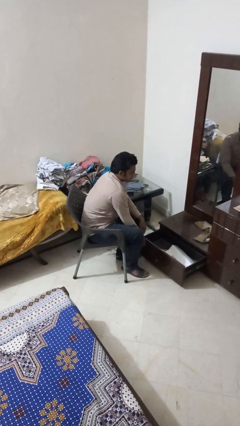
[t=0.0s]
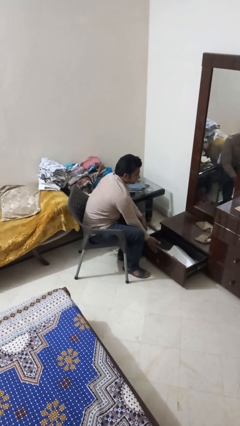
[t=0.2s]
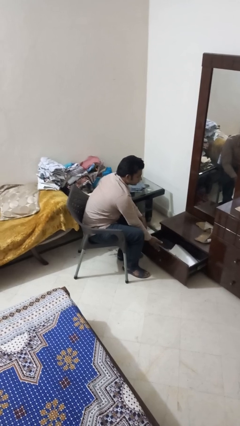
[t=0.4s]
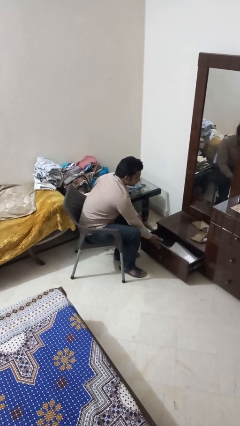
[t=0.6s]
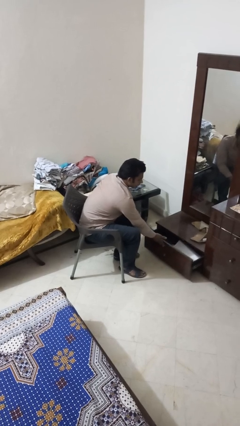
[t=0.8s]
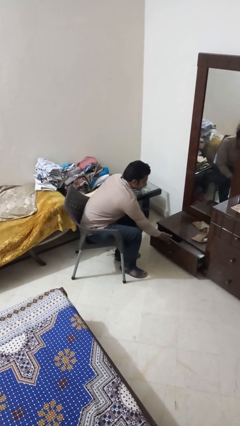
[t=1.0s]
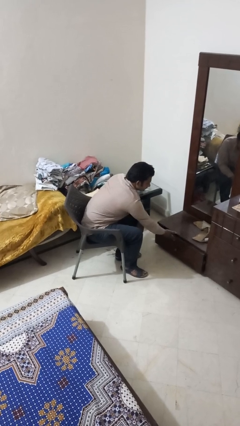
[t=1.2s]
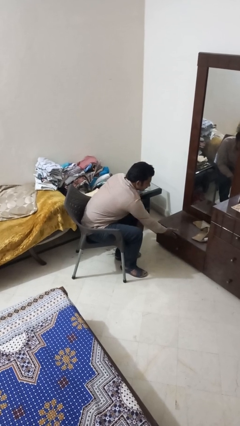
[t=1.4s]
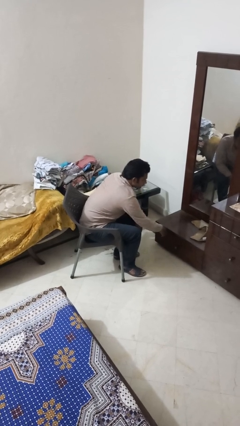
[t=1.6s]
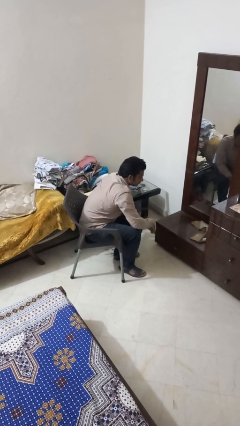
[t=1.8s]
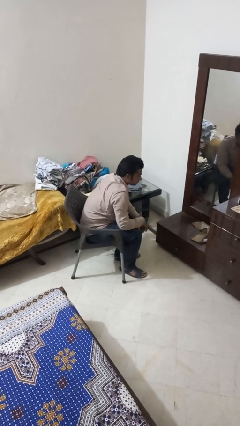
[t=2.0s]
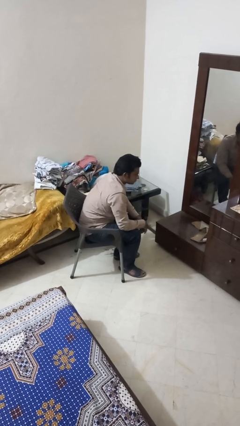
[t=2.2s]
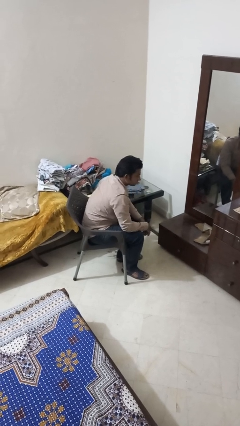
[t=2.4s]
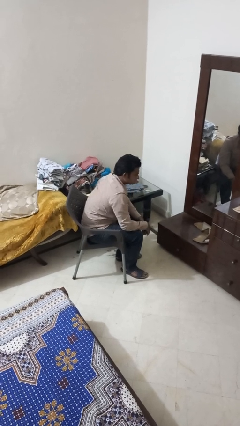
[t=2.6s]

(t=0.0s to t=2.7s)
person closes dresser drawer

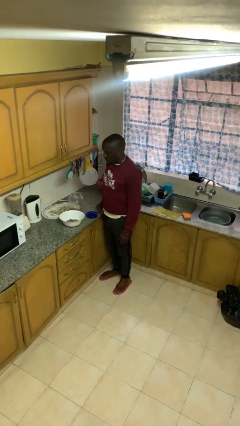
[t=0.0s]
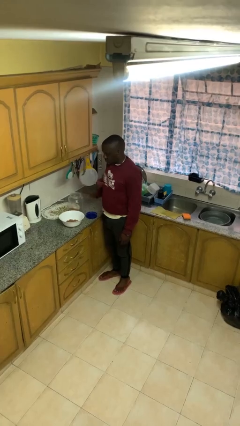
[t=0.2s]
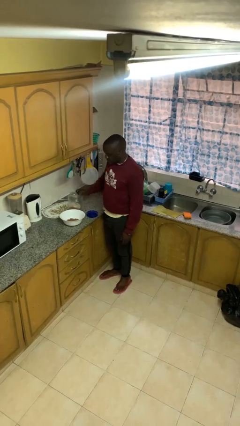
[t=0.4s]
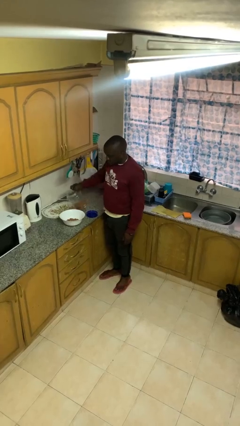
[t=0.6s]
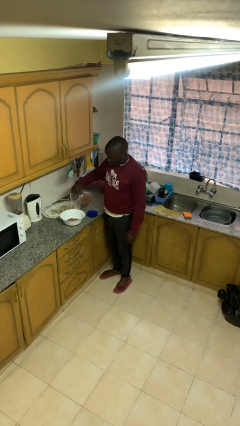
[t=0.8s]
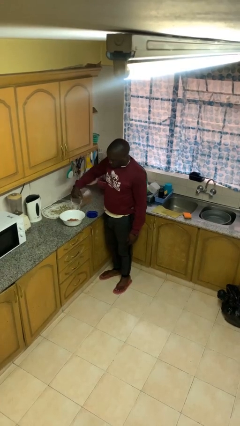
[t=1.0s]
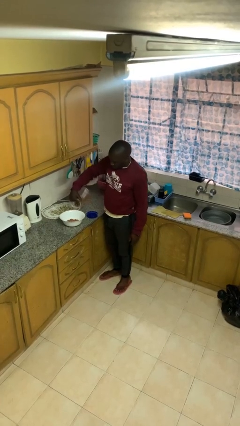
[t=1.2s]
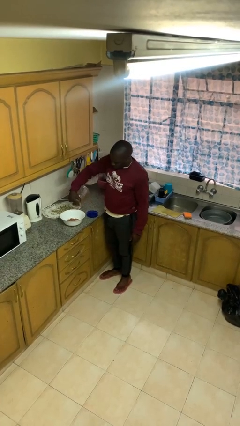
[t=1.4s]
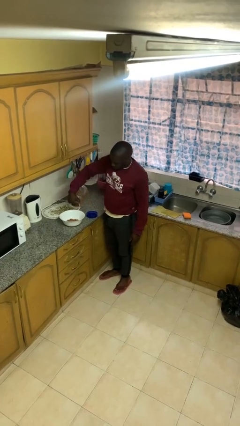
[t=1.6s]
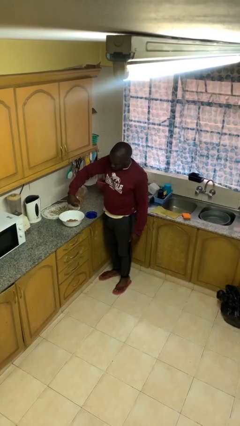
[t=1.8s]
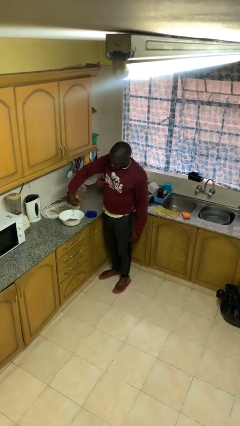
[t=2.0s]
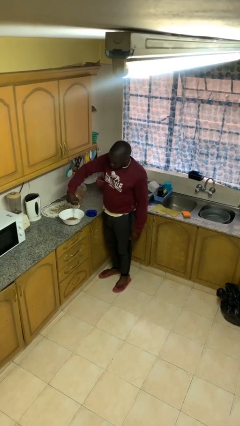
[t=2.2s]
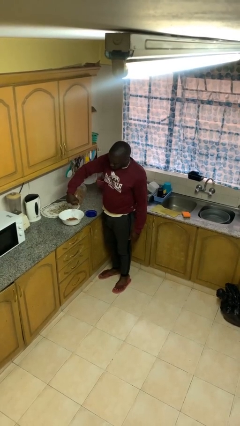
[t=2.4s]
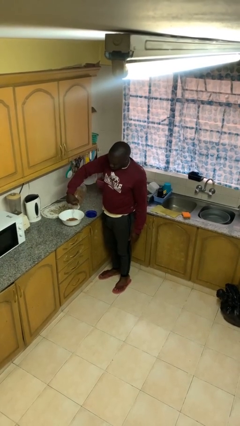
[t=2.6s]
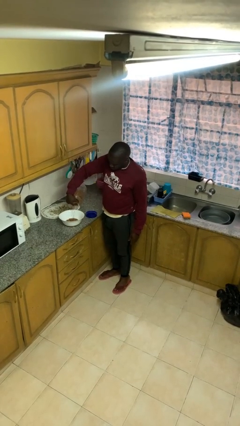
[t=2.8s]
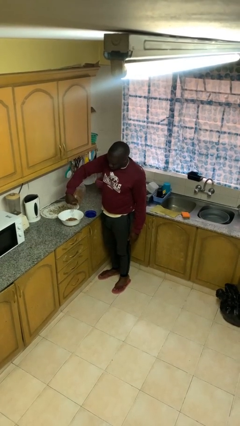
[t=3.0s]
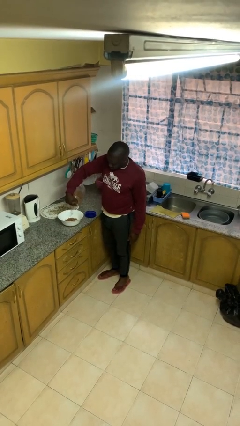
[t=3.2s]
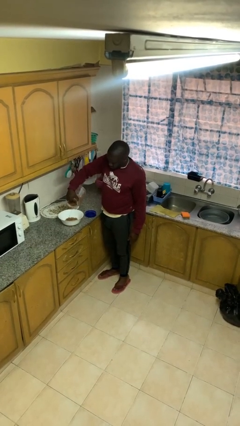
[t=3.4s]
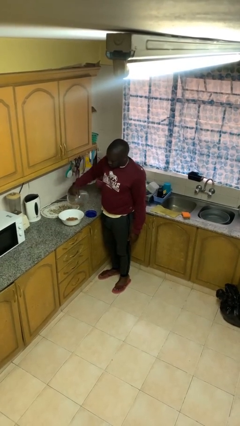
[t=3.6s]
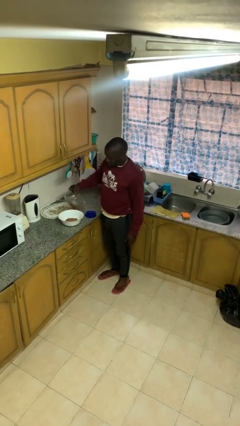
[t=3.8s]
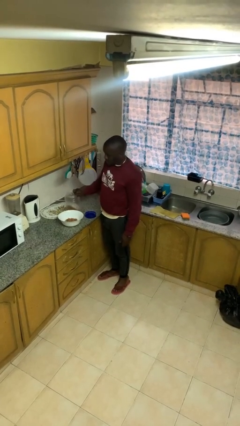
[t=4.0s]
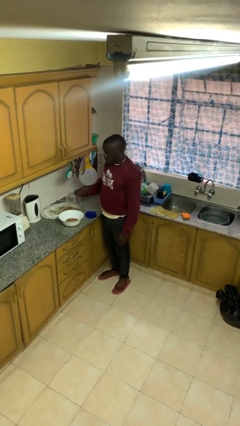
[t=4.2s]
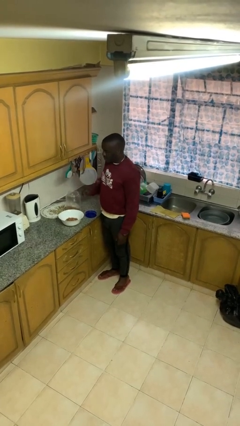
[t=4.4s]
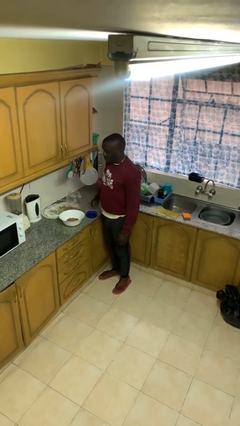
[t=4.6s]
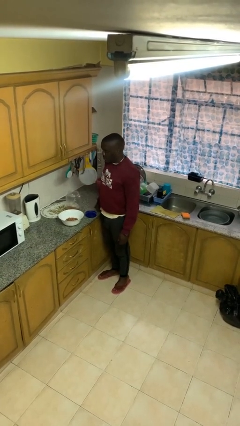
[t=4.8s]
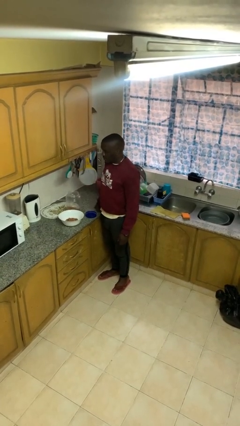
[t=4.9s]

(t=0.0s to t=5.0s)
person pours into bowl

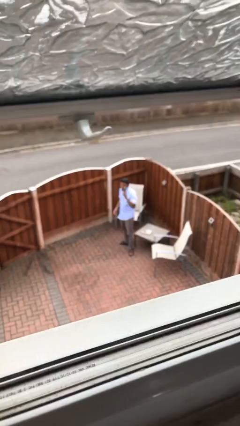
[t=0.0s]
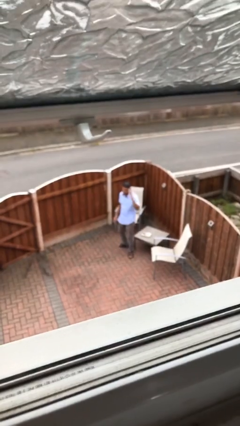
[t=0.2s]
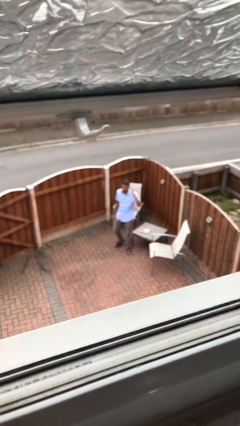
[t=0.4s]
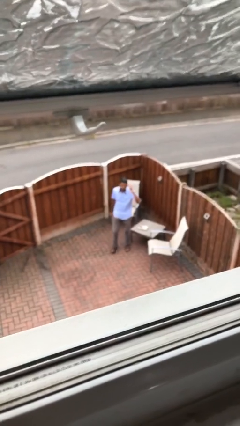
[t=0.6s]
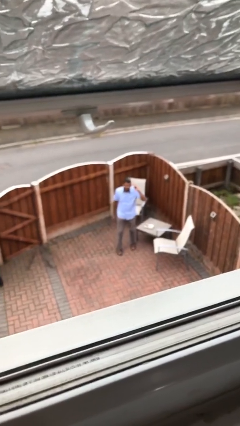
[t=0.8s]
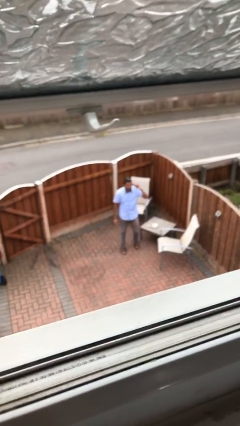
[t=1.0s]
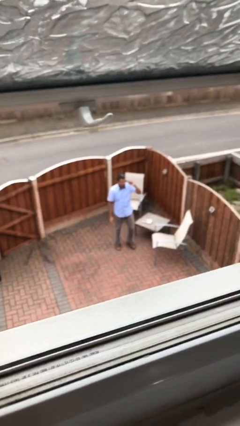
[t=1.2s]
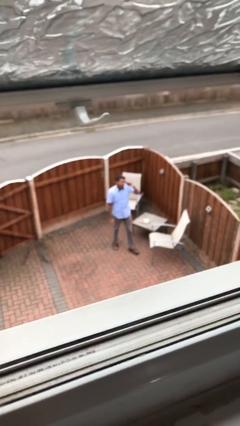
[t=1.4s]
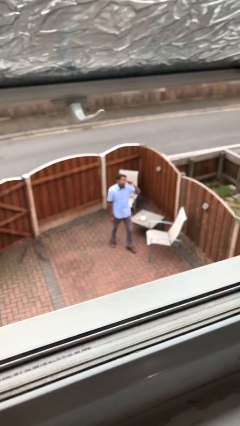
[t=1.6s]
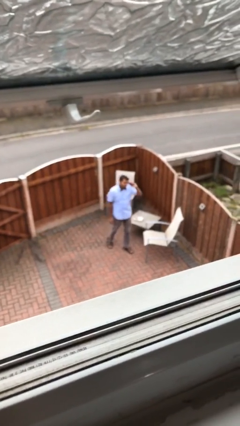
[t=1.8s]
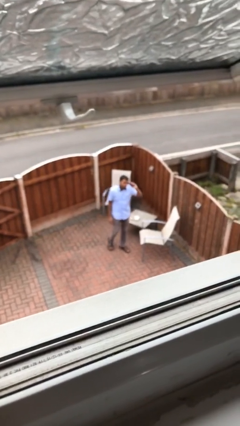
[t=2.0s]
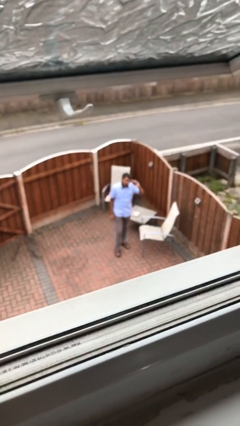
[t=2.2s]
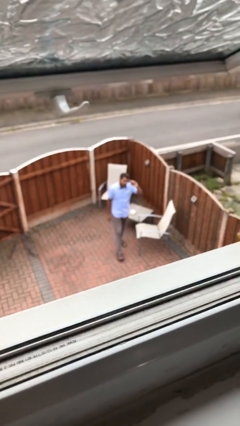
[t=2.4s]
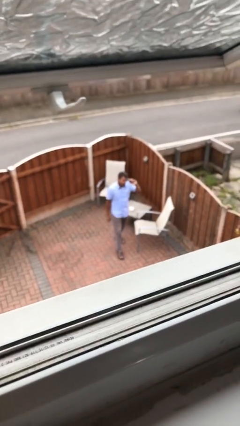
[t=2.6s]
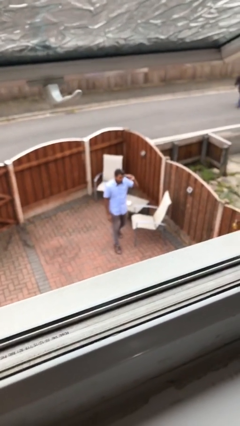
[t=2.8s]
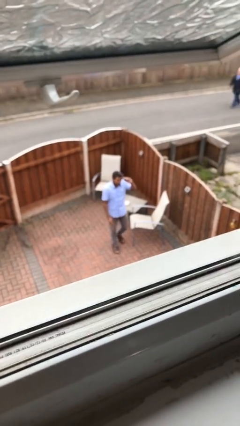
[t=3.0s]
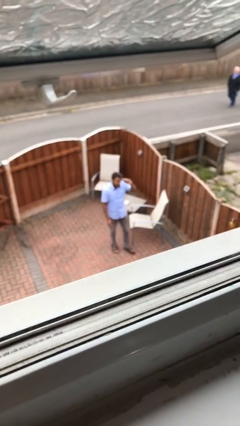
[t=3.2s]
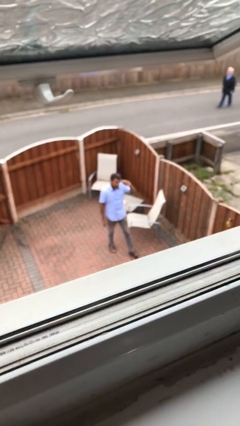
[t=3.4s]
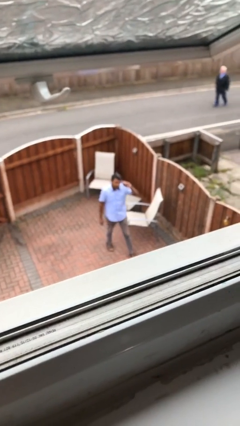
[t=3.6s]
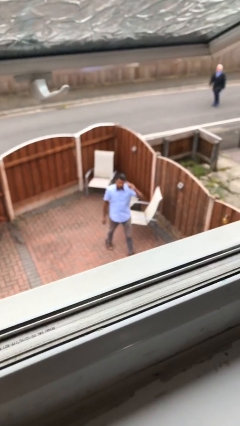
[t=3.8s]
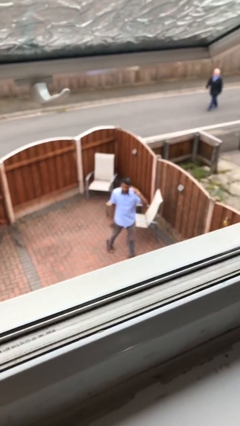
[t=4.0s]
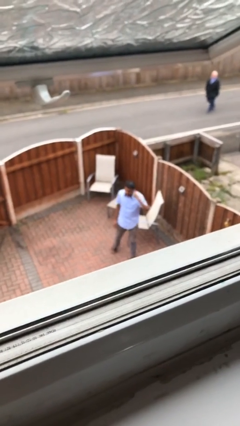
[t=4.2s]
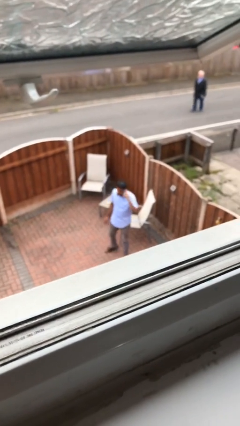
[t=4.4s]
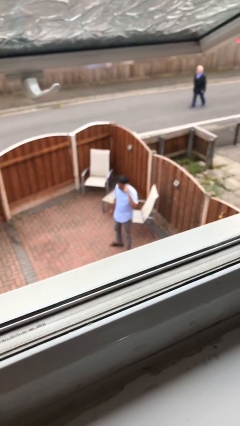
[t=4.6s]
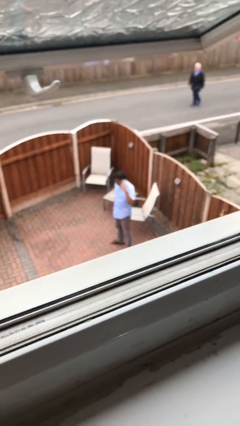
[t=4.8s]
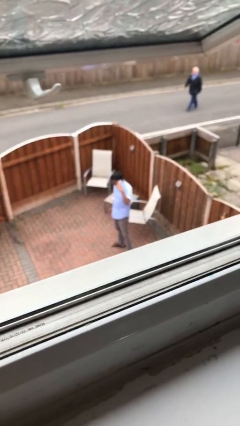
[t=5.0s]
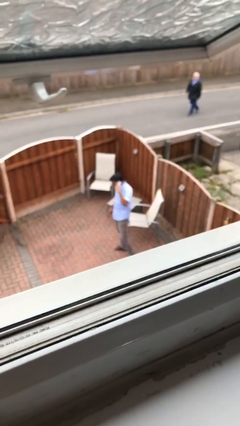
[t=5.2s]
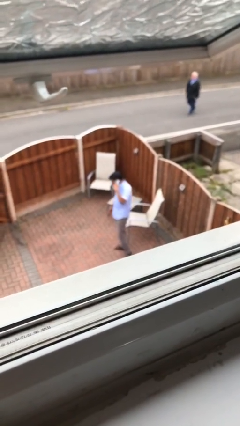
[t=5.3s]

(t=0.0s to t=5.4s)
person talks on phone

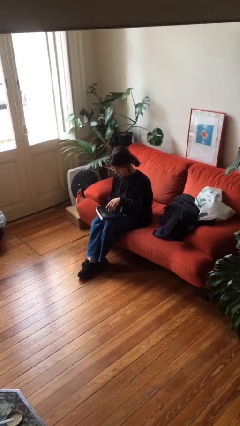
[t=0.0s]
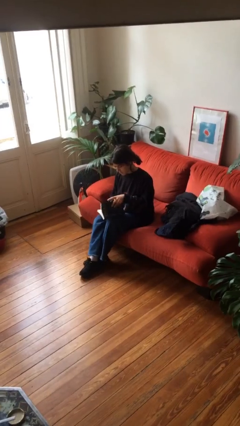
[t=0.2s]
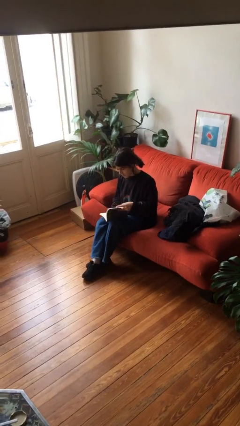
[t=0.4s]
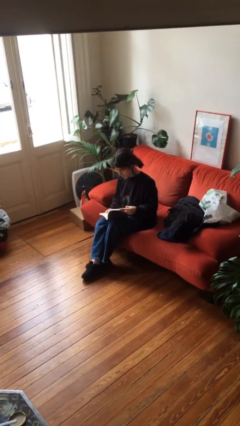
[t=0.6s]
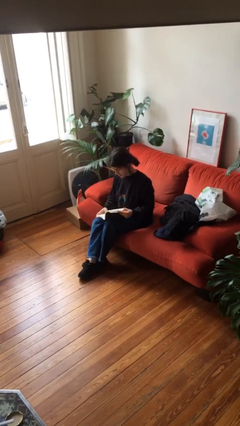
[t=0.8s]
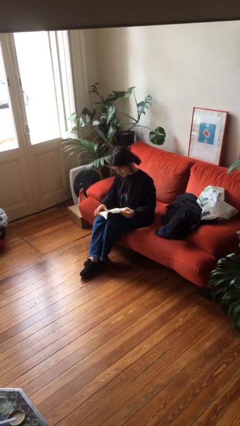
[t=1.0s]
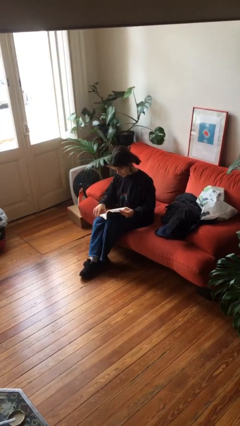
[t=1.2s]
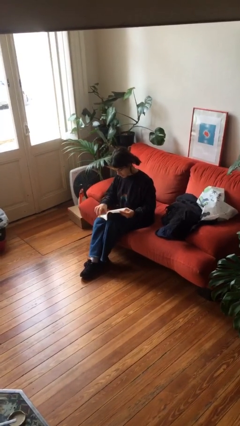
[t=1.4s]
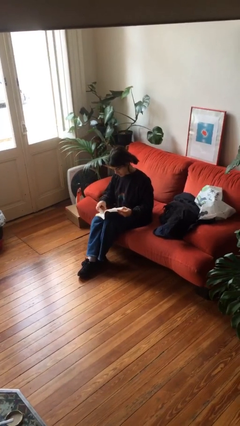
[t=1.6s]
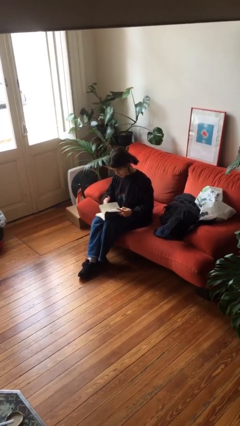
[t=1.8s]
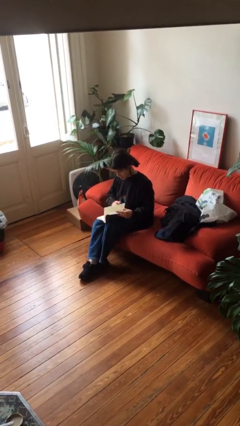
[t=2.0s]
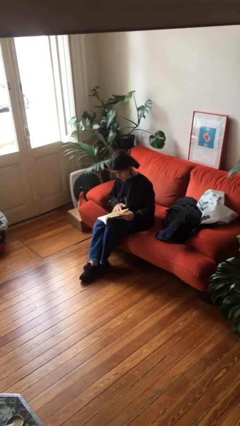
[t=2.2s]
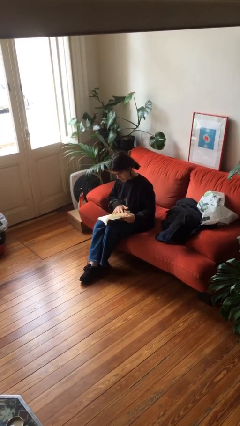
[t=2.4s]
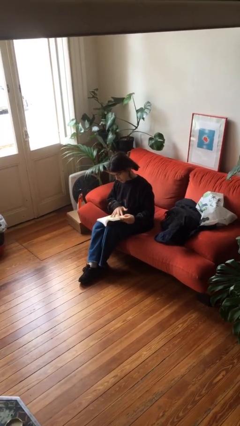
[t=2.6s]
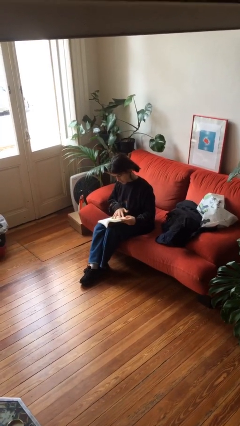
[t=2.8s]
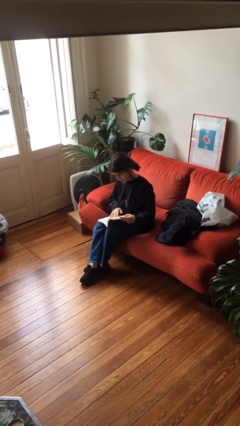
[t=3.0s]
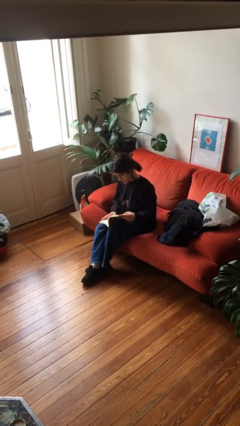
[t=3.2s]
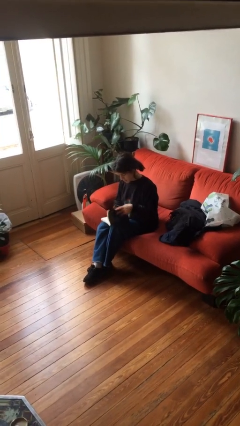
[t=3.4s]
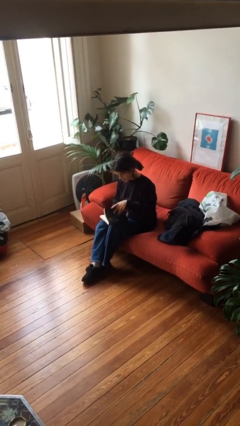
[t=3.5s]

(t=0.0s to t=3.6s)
person reads book

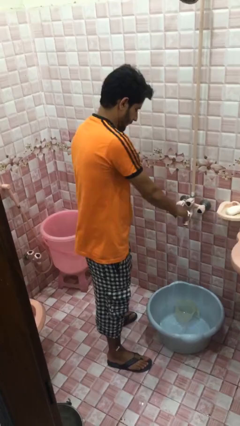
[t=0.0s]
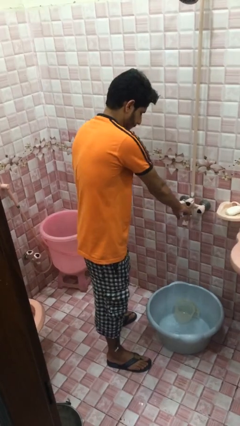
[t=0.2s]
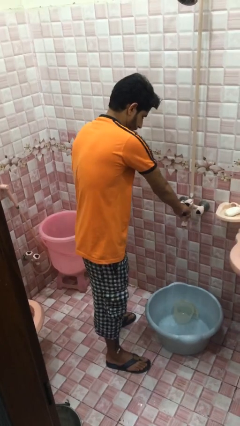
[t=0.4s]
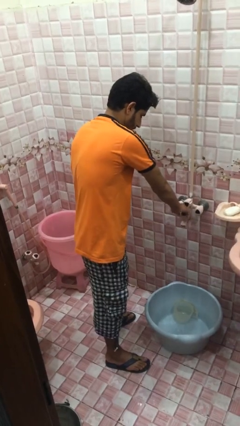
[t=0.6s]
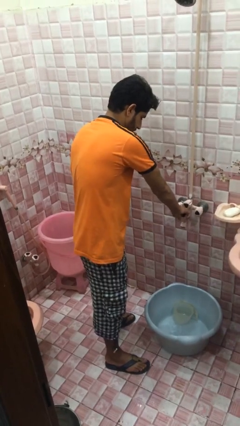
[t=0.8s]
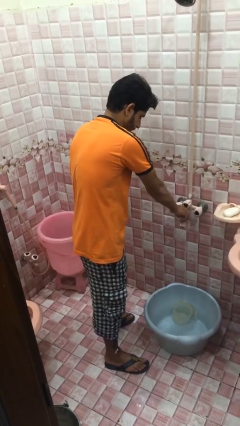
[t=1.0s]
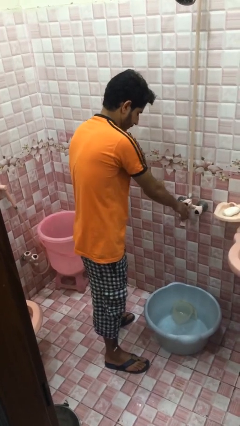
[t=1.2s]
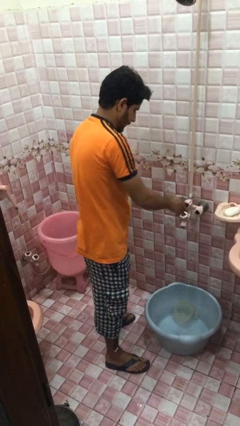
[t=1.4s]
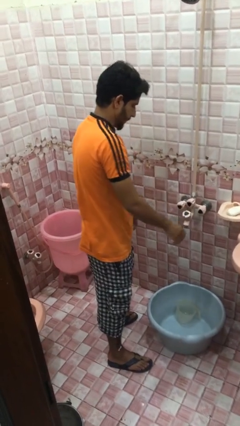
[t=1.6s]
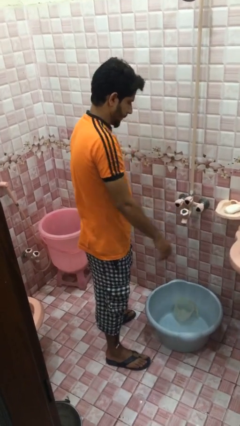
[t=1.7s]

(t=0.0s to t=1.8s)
person turns off faucet
